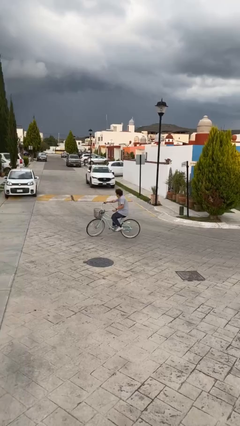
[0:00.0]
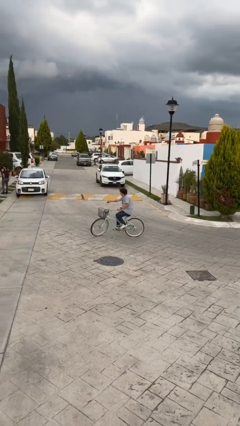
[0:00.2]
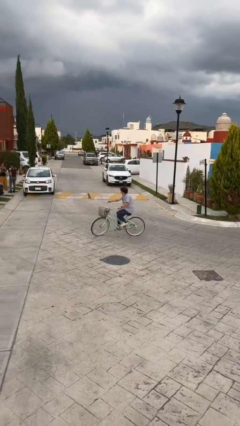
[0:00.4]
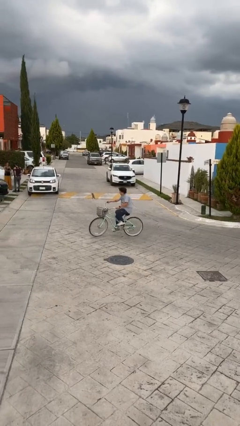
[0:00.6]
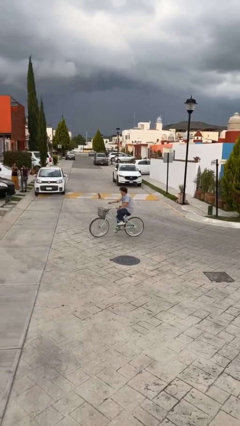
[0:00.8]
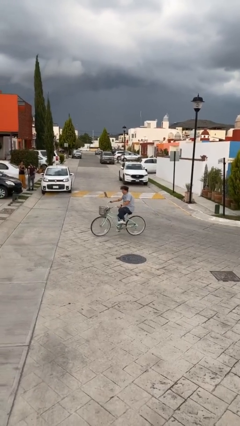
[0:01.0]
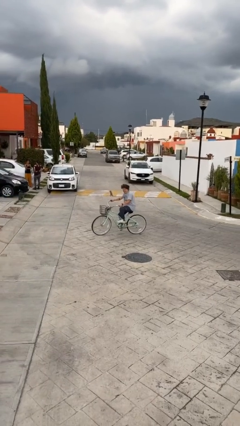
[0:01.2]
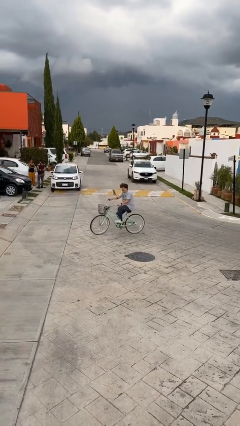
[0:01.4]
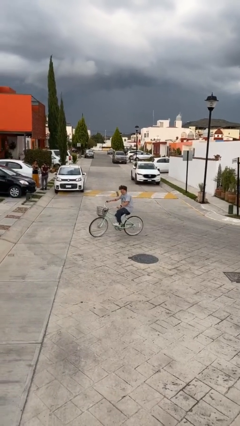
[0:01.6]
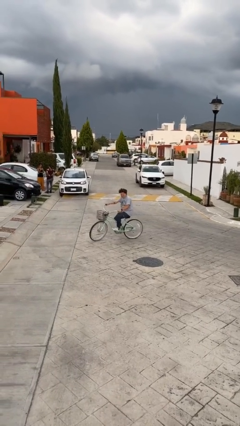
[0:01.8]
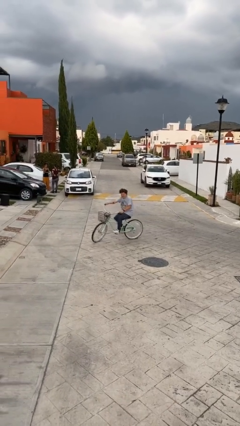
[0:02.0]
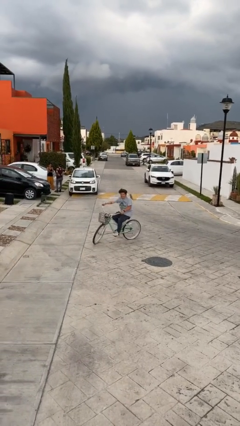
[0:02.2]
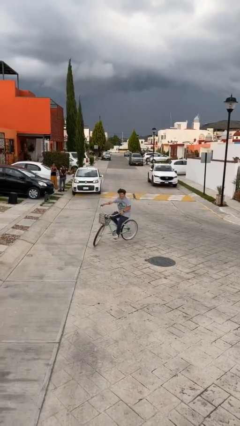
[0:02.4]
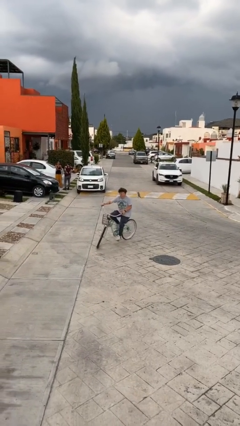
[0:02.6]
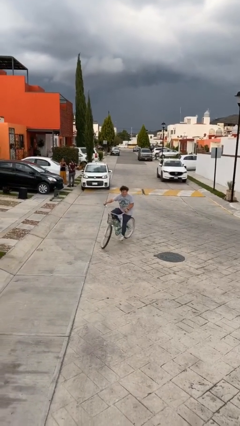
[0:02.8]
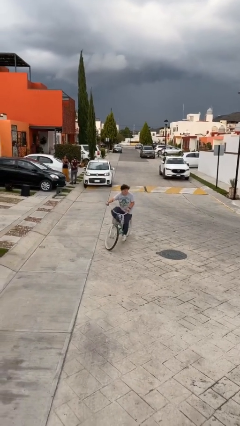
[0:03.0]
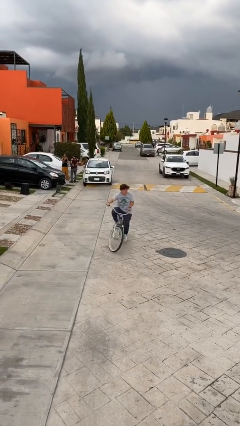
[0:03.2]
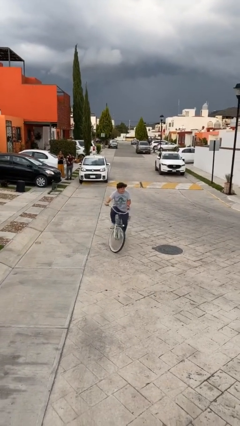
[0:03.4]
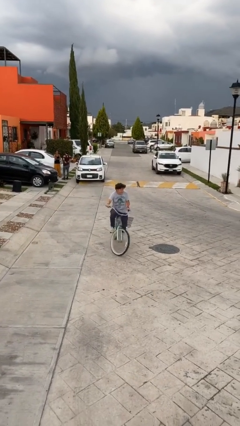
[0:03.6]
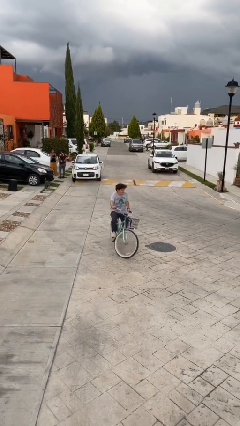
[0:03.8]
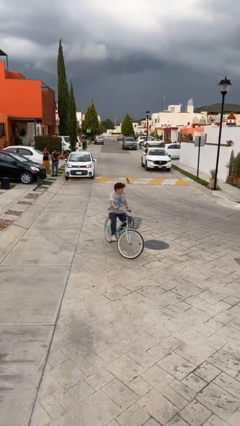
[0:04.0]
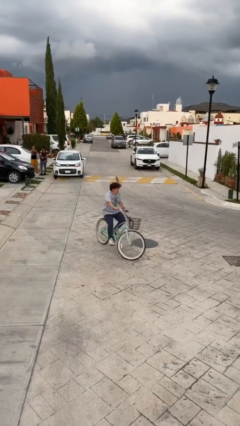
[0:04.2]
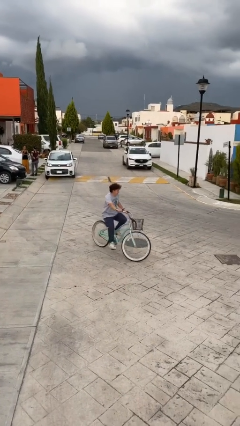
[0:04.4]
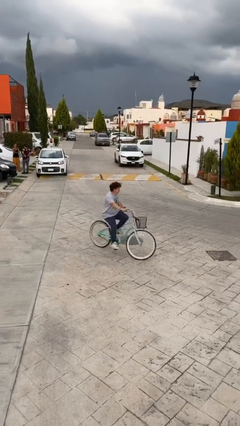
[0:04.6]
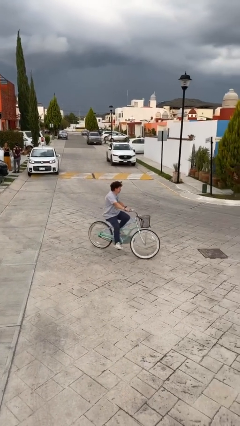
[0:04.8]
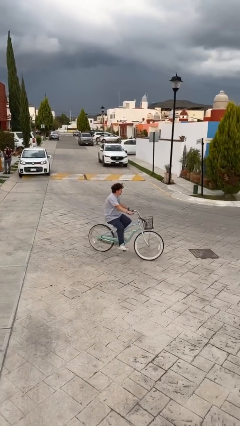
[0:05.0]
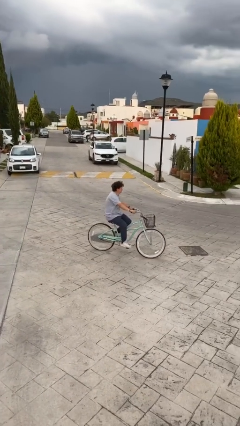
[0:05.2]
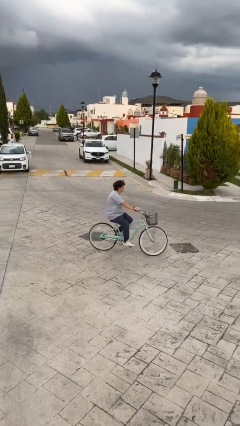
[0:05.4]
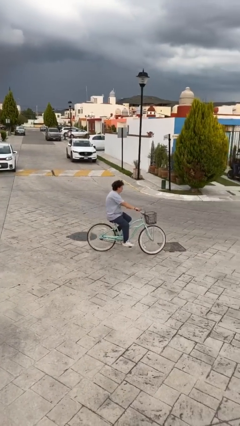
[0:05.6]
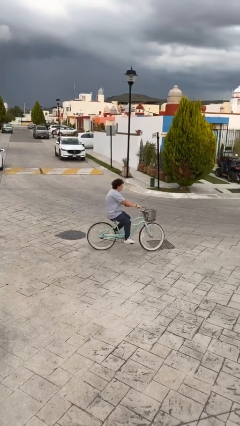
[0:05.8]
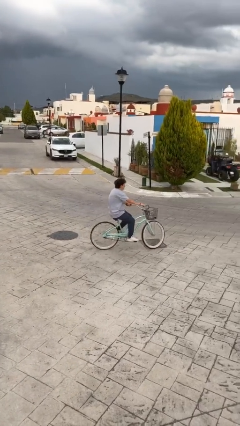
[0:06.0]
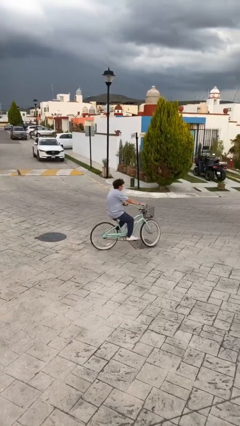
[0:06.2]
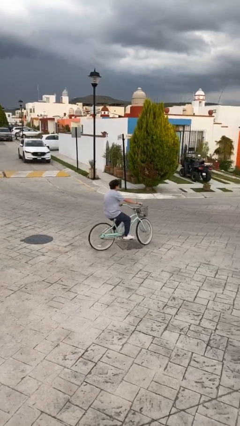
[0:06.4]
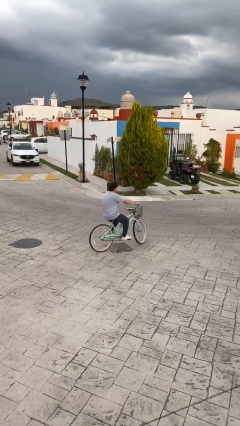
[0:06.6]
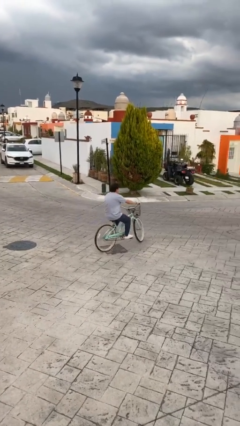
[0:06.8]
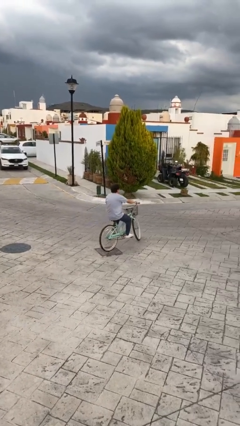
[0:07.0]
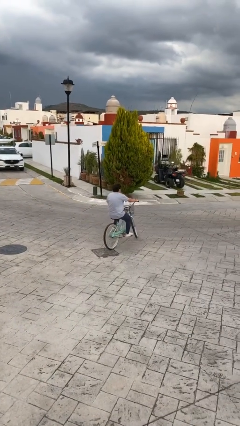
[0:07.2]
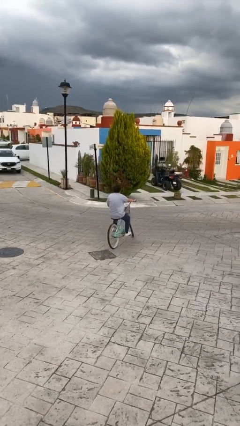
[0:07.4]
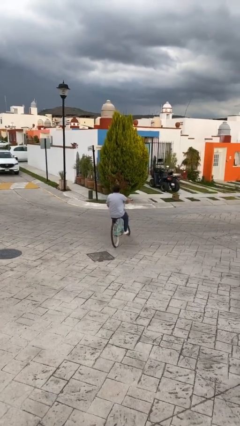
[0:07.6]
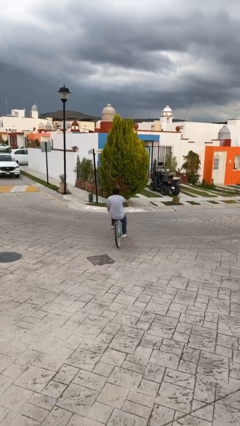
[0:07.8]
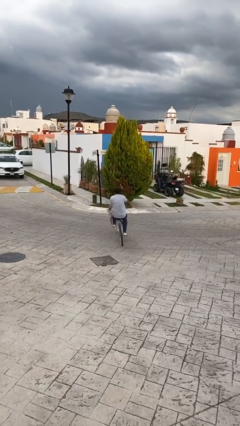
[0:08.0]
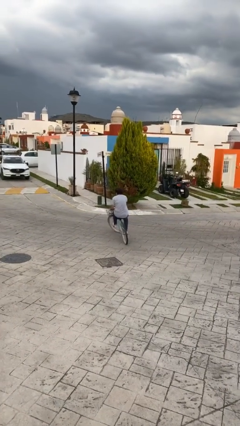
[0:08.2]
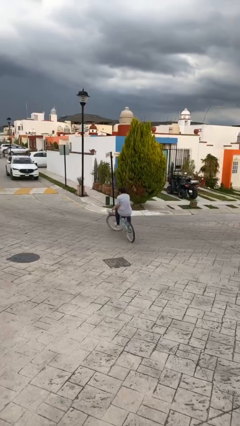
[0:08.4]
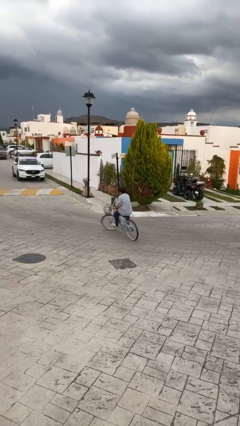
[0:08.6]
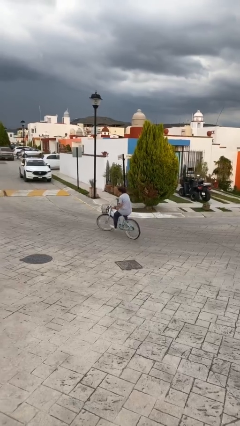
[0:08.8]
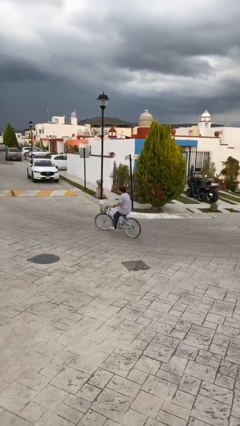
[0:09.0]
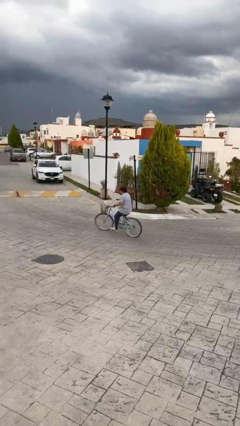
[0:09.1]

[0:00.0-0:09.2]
person rides bicycle

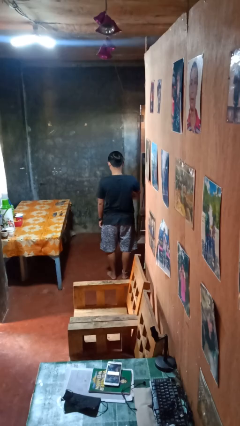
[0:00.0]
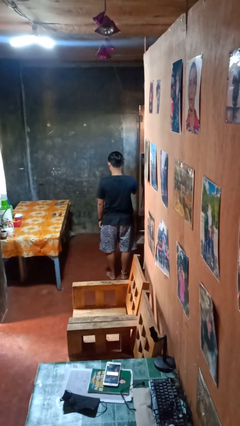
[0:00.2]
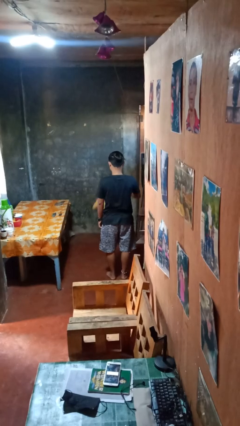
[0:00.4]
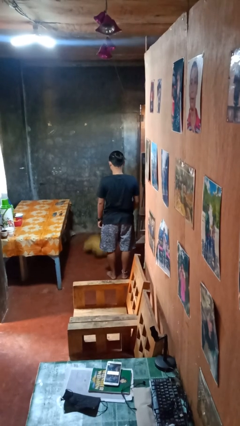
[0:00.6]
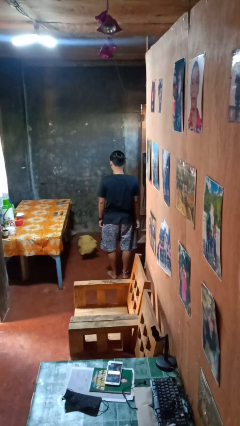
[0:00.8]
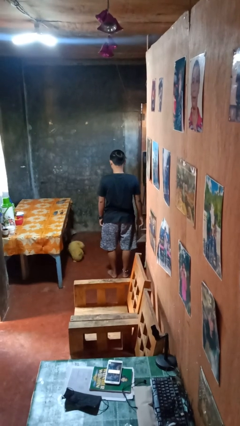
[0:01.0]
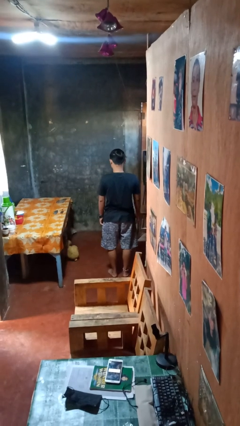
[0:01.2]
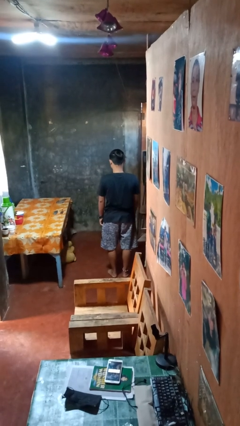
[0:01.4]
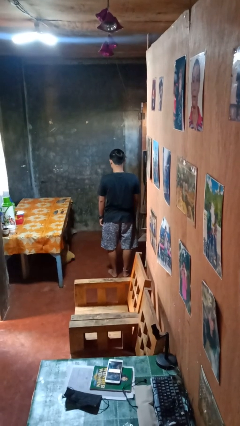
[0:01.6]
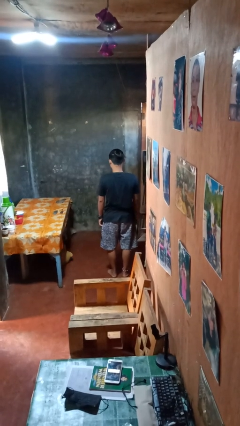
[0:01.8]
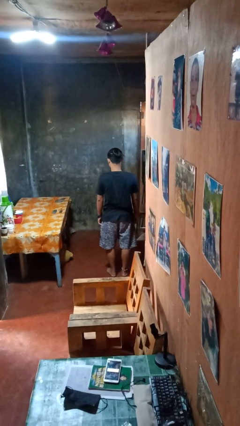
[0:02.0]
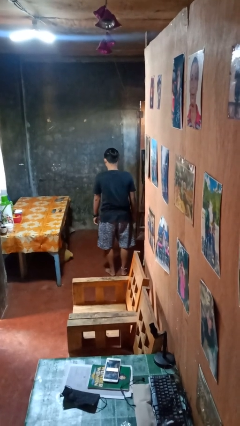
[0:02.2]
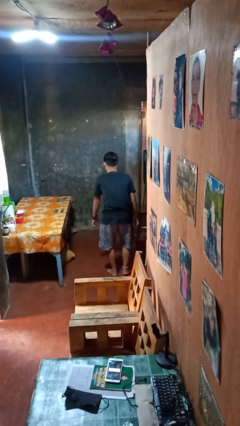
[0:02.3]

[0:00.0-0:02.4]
person throws object to ground

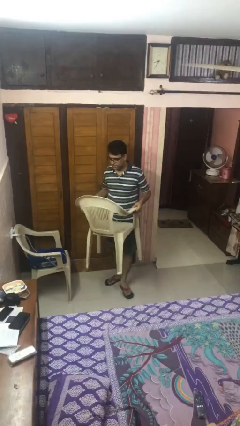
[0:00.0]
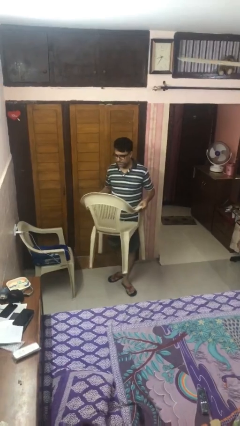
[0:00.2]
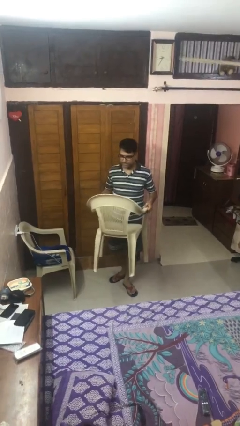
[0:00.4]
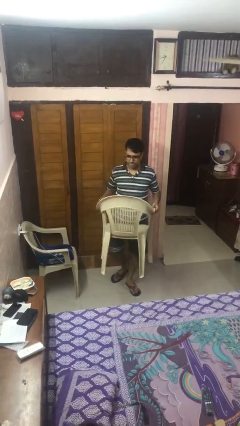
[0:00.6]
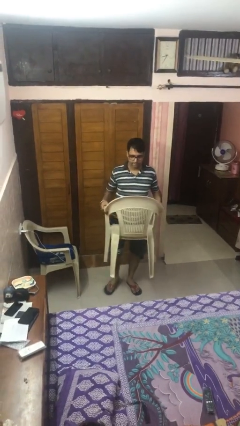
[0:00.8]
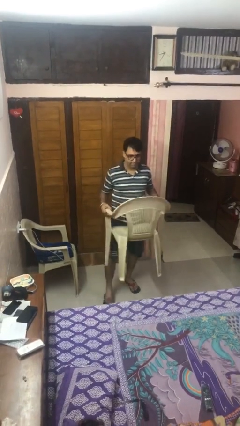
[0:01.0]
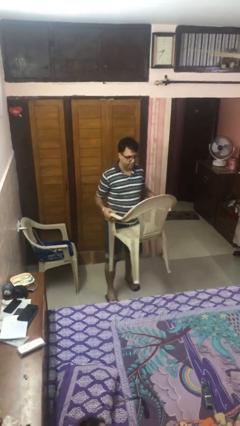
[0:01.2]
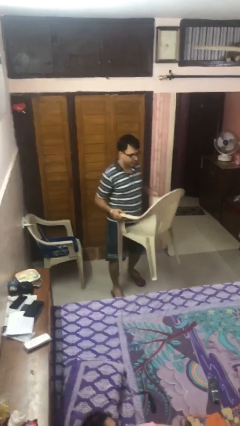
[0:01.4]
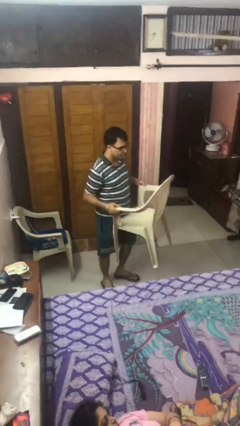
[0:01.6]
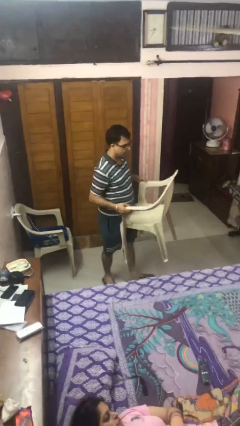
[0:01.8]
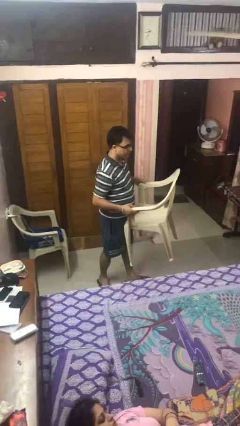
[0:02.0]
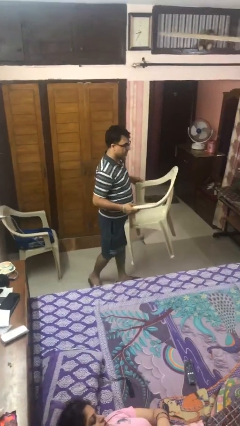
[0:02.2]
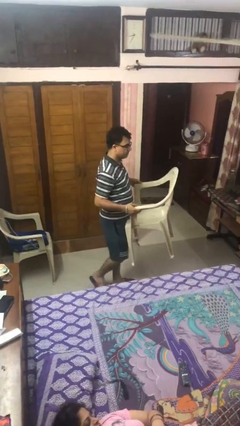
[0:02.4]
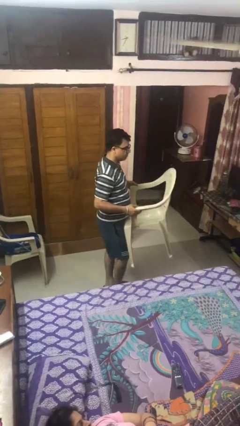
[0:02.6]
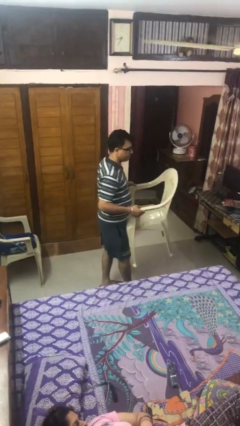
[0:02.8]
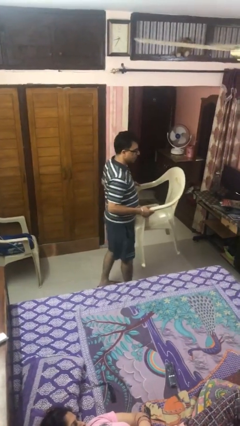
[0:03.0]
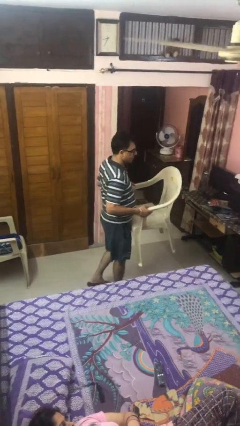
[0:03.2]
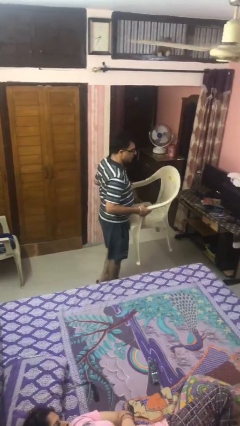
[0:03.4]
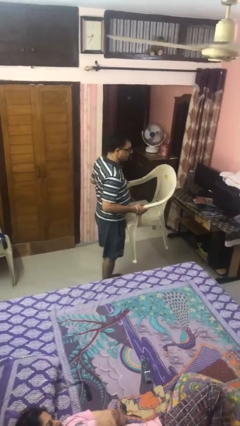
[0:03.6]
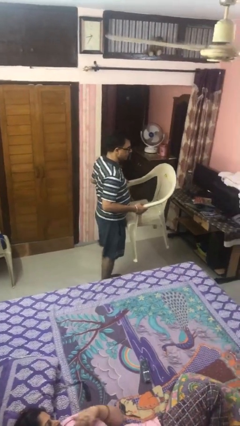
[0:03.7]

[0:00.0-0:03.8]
person carries furniture

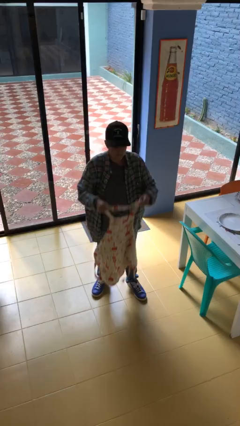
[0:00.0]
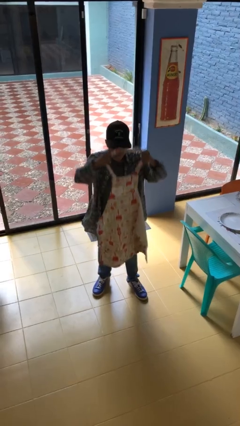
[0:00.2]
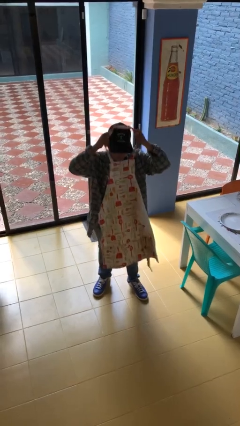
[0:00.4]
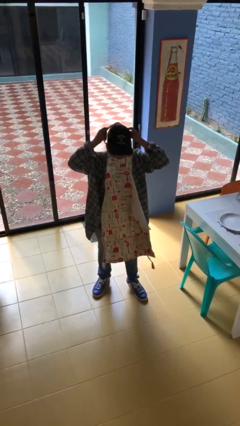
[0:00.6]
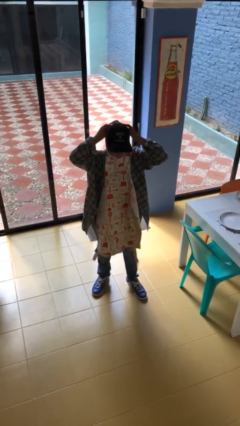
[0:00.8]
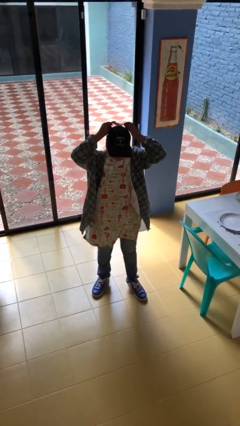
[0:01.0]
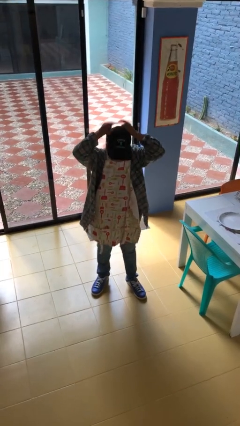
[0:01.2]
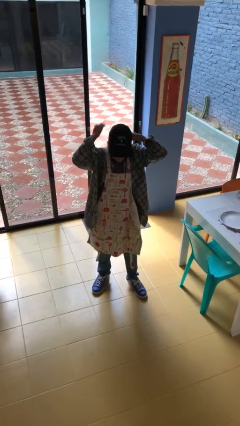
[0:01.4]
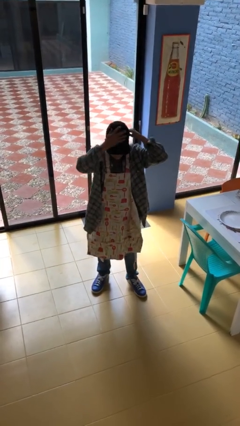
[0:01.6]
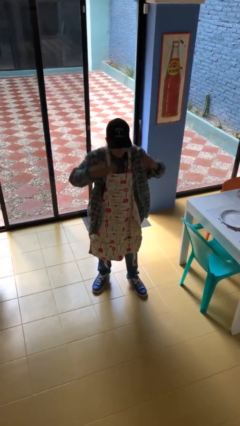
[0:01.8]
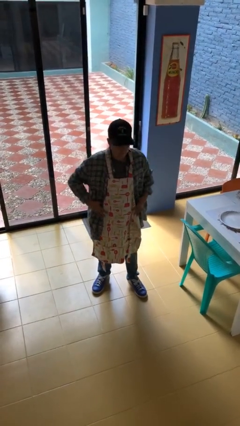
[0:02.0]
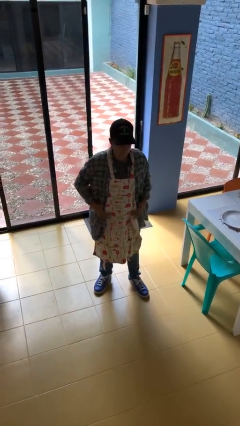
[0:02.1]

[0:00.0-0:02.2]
person puts on apron

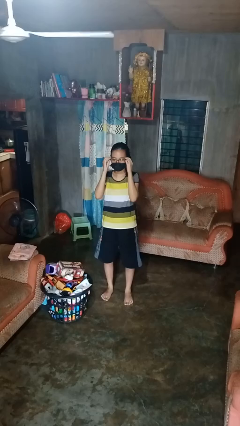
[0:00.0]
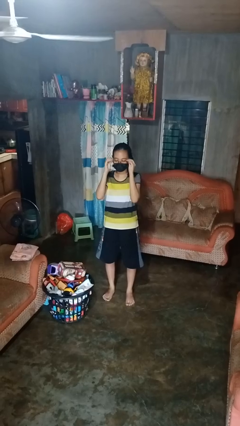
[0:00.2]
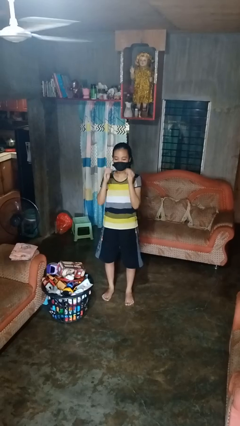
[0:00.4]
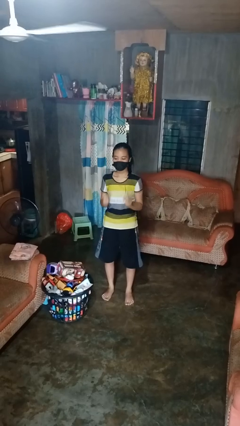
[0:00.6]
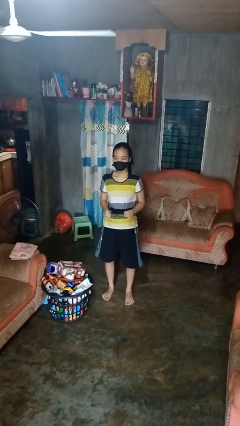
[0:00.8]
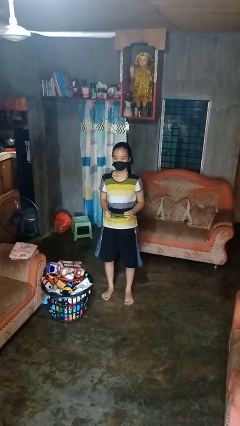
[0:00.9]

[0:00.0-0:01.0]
person takes off glasses
